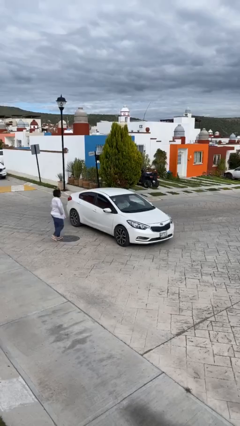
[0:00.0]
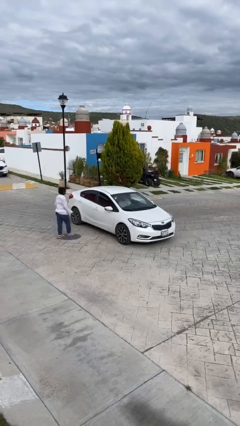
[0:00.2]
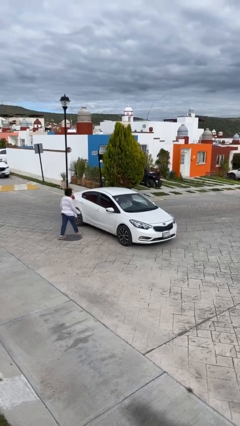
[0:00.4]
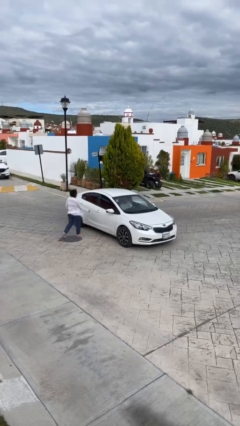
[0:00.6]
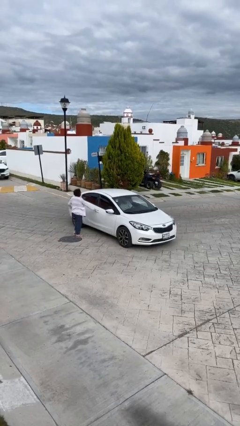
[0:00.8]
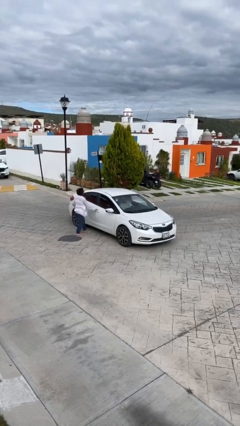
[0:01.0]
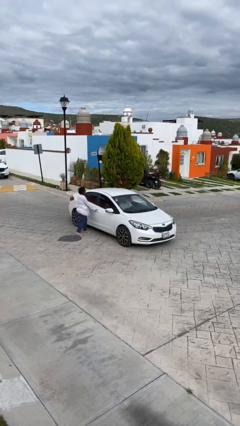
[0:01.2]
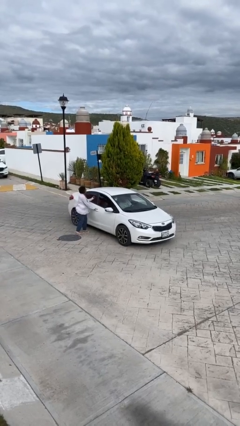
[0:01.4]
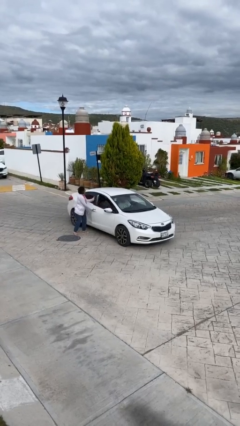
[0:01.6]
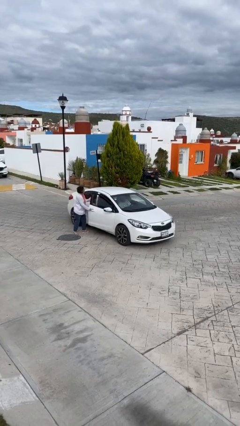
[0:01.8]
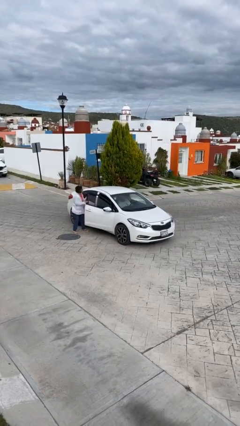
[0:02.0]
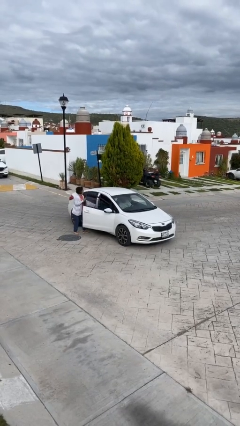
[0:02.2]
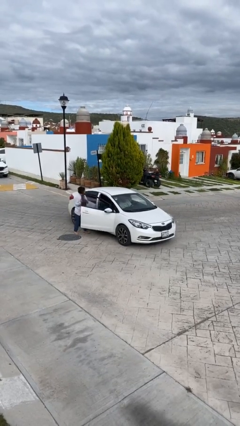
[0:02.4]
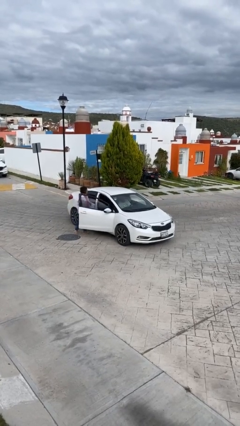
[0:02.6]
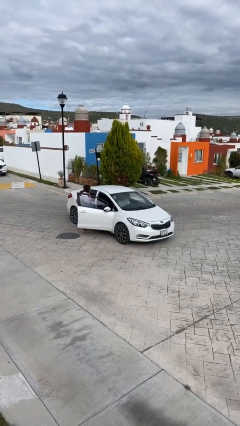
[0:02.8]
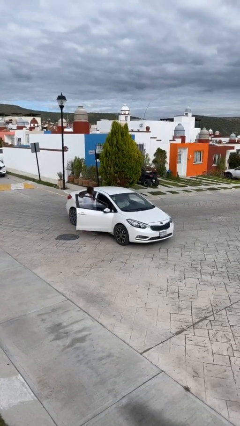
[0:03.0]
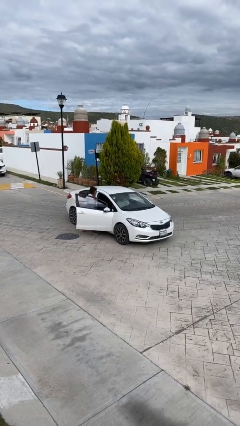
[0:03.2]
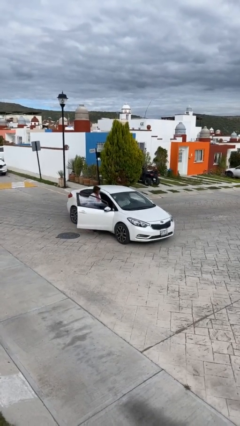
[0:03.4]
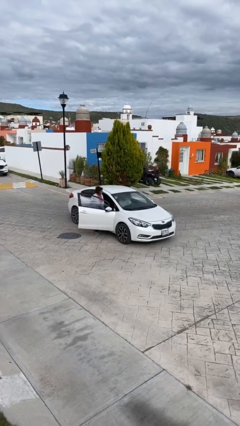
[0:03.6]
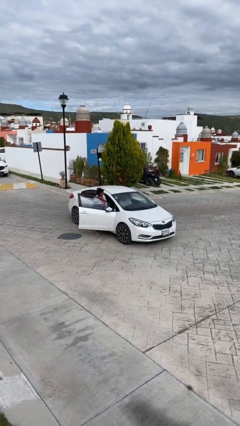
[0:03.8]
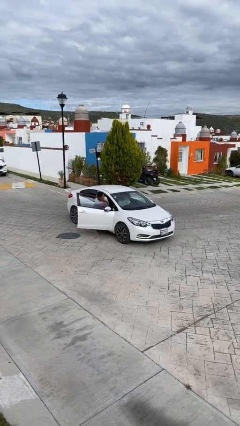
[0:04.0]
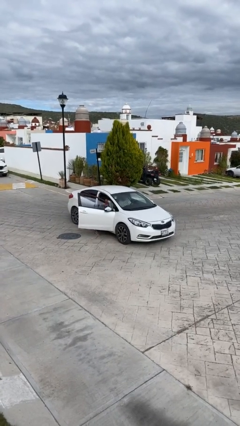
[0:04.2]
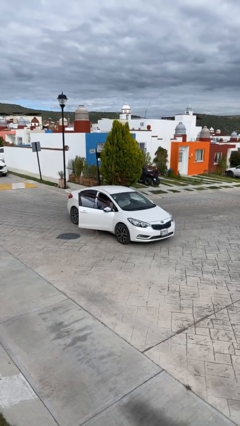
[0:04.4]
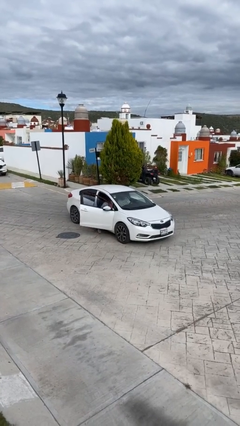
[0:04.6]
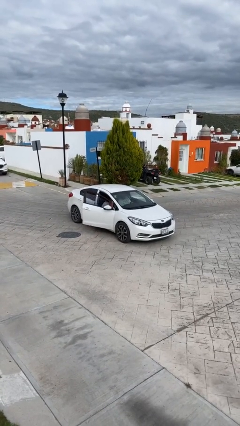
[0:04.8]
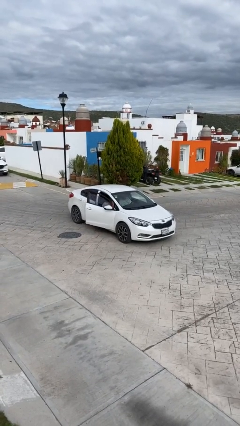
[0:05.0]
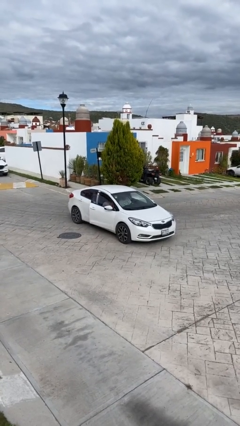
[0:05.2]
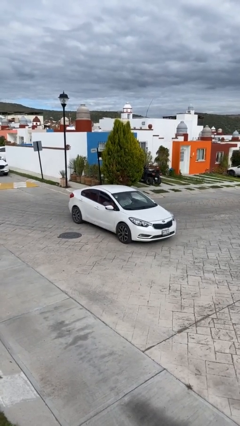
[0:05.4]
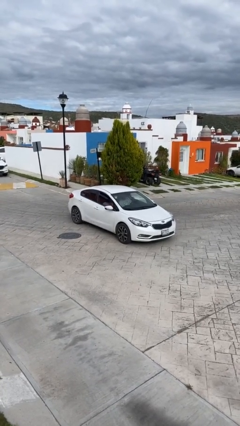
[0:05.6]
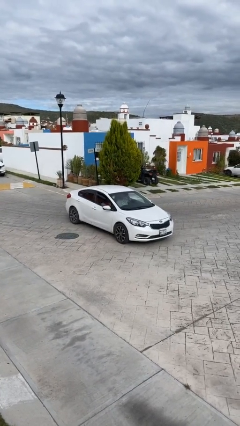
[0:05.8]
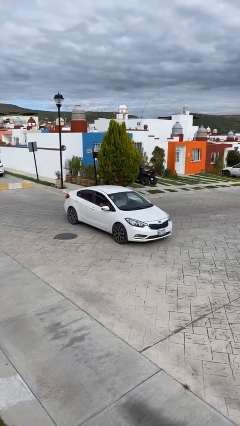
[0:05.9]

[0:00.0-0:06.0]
car picks up person

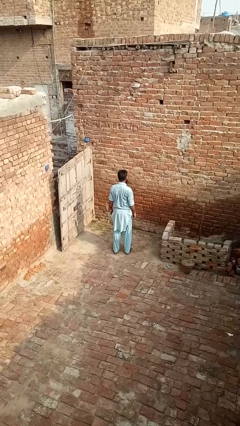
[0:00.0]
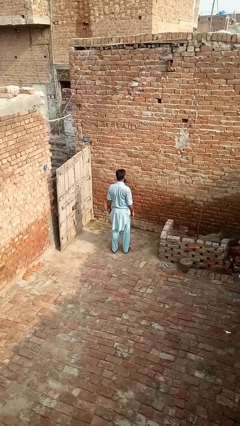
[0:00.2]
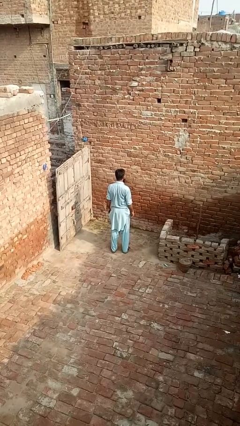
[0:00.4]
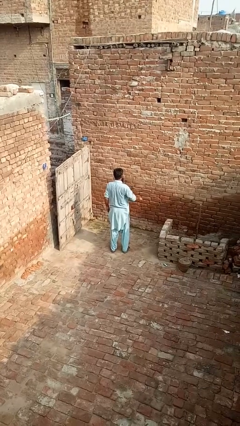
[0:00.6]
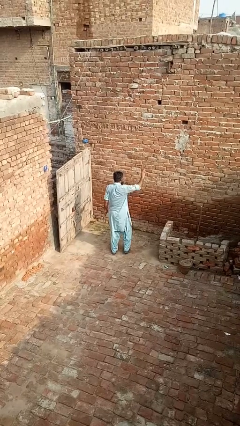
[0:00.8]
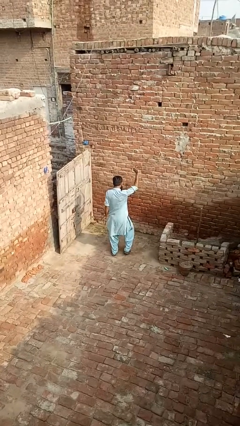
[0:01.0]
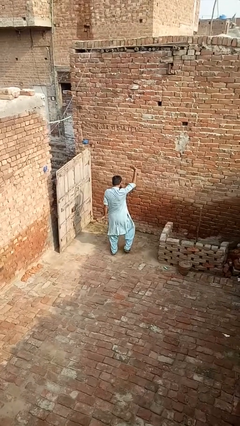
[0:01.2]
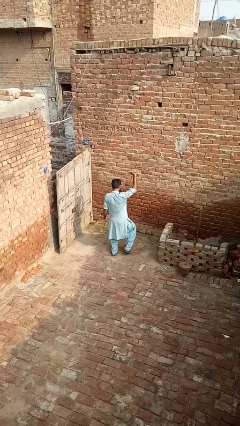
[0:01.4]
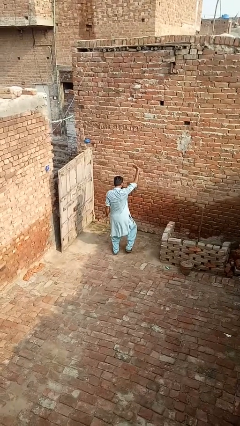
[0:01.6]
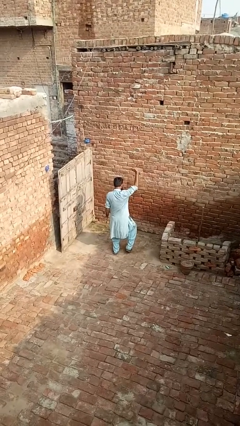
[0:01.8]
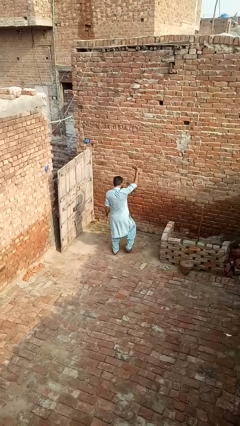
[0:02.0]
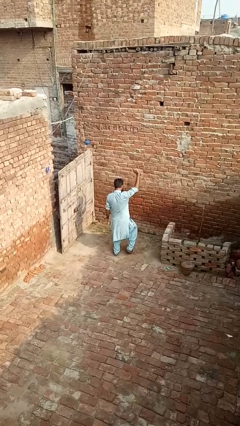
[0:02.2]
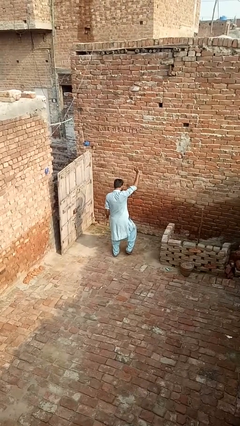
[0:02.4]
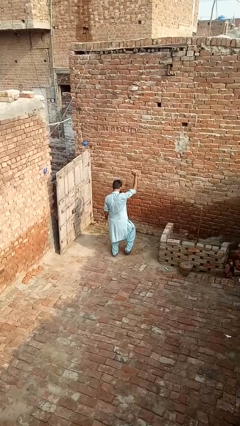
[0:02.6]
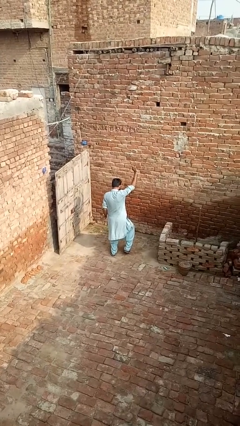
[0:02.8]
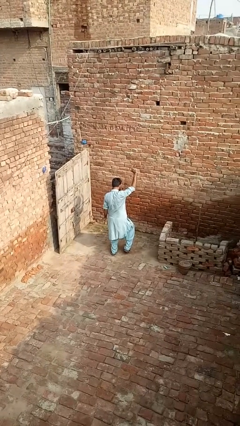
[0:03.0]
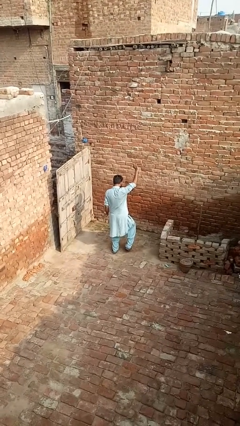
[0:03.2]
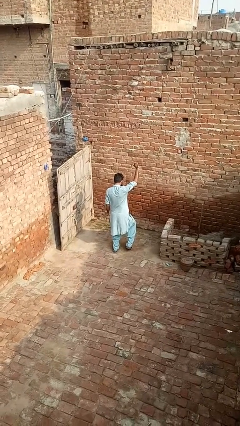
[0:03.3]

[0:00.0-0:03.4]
person dances in place

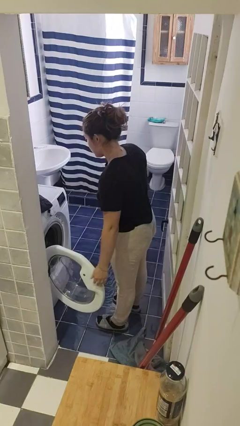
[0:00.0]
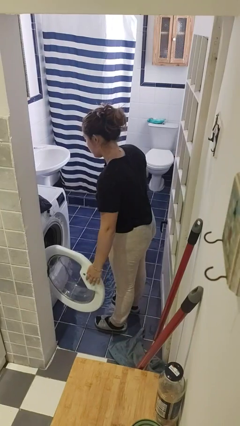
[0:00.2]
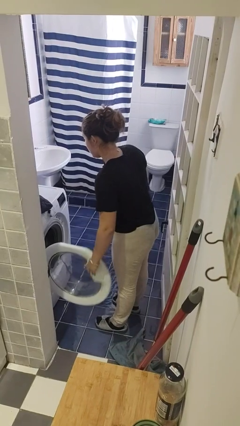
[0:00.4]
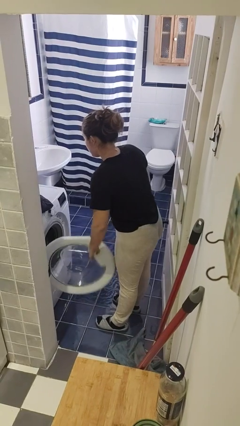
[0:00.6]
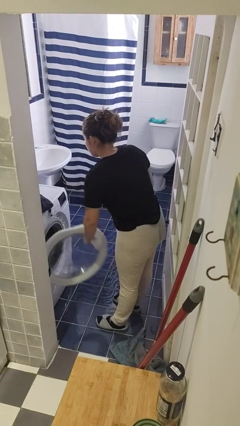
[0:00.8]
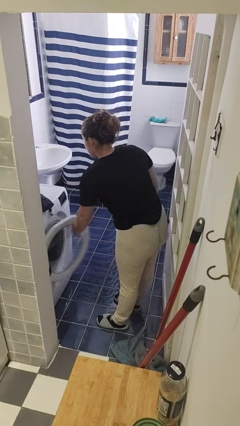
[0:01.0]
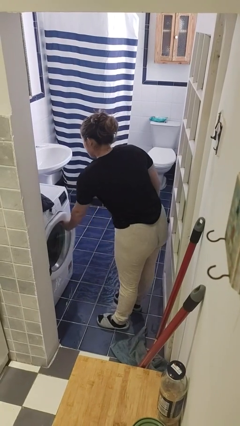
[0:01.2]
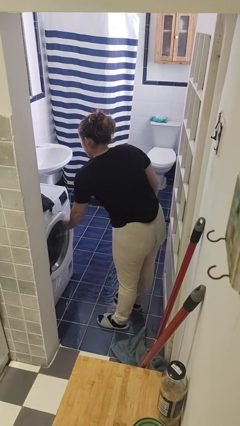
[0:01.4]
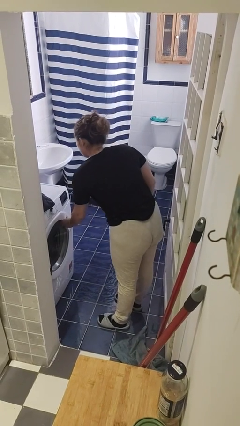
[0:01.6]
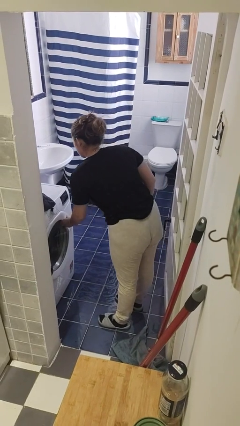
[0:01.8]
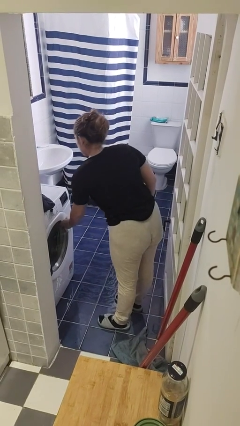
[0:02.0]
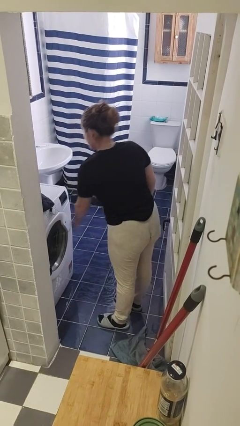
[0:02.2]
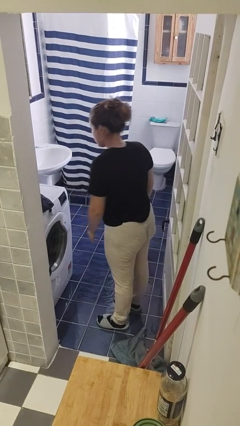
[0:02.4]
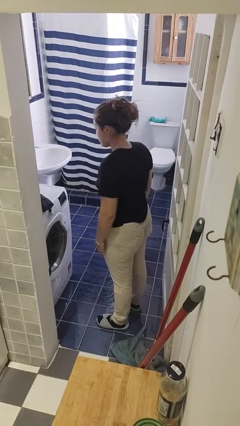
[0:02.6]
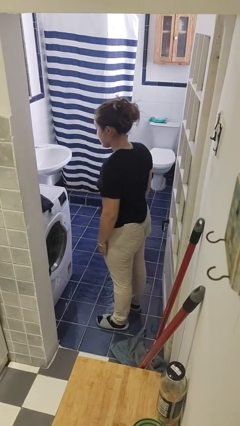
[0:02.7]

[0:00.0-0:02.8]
person closes clothes washer

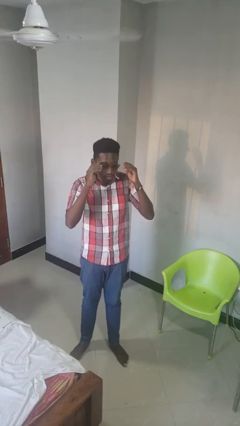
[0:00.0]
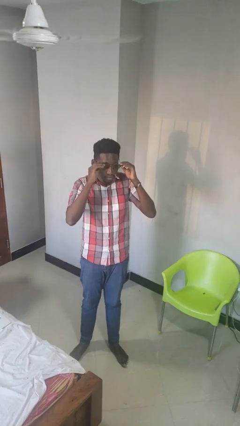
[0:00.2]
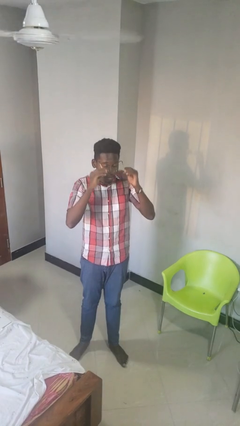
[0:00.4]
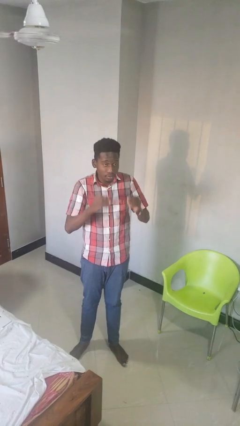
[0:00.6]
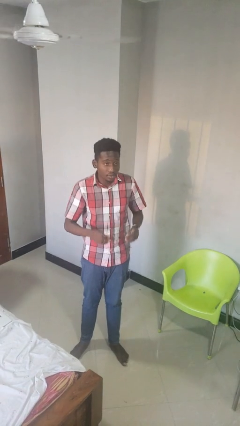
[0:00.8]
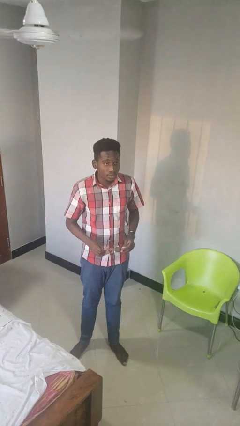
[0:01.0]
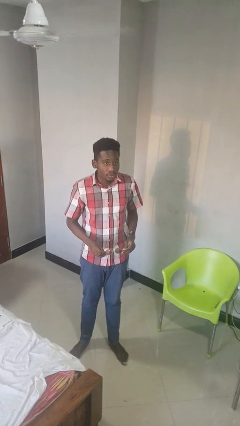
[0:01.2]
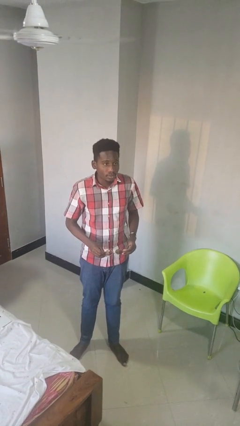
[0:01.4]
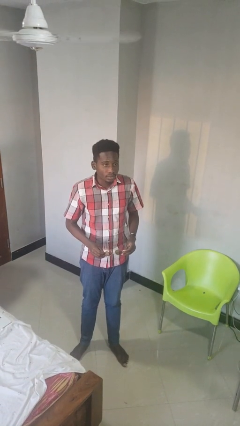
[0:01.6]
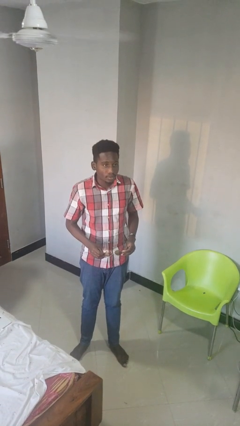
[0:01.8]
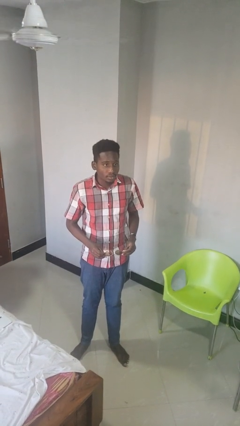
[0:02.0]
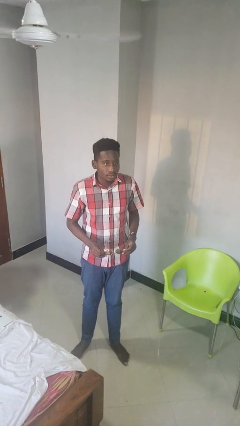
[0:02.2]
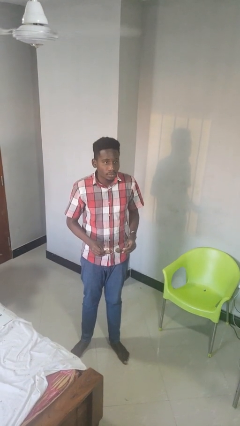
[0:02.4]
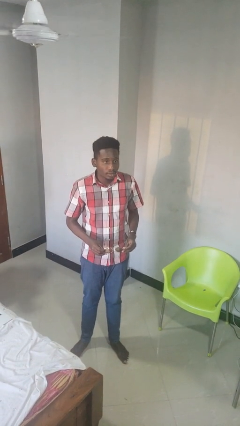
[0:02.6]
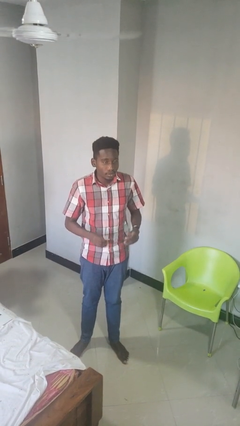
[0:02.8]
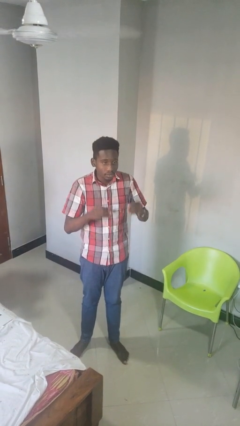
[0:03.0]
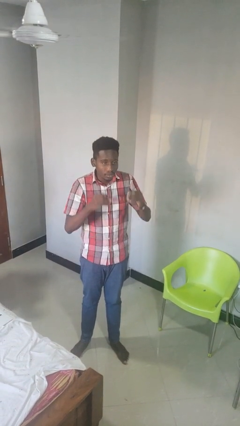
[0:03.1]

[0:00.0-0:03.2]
person takes off sunglasses

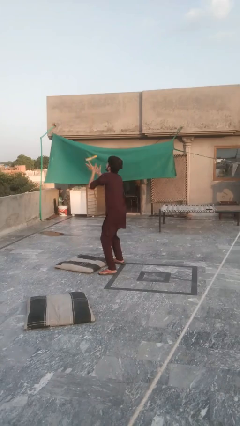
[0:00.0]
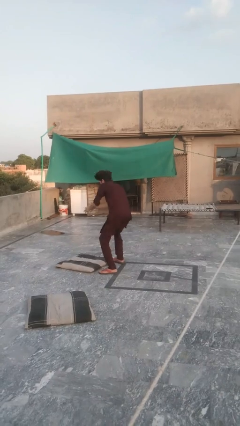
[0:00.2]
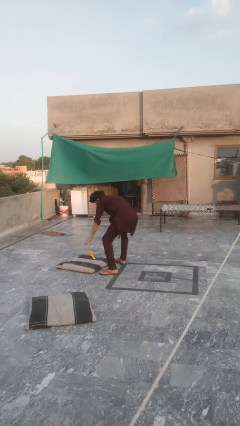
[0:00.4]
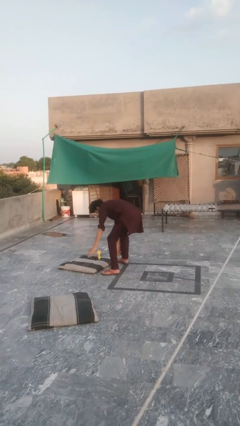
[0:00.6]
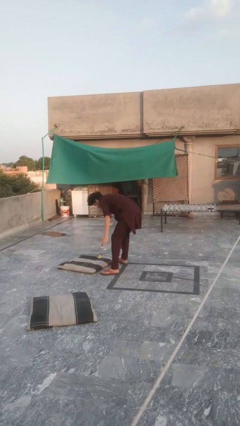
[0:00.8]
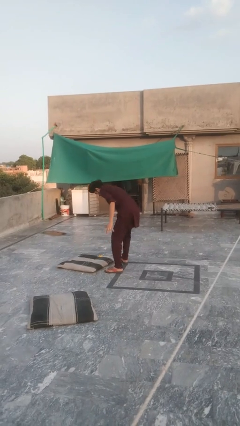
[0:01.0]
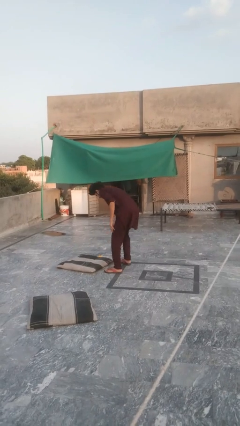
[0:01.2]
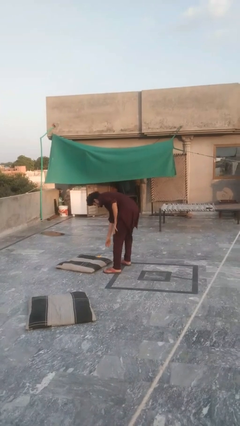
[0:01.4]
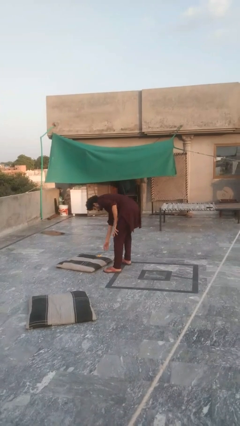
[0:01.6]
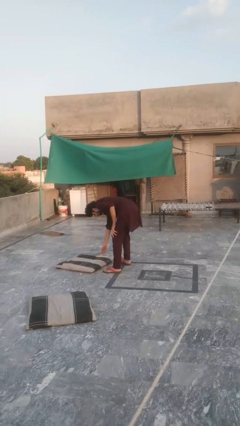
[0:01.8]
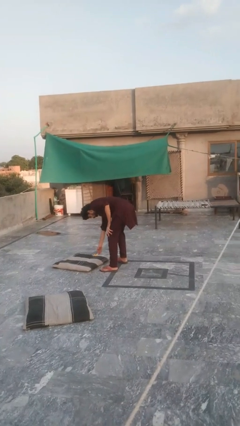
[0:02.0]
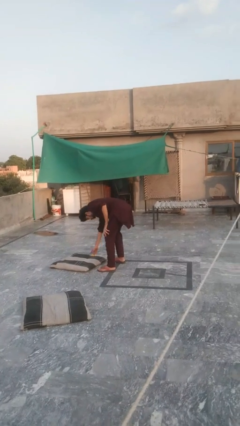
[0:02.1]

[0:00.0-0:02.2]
person catches dropped object

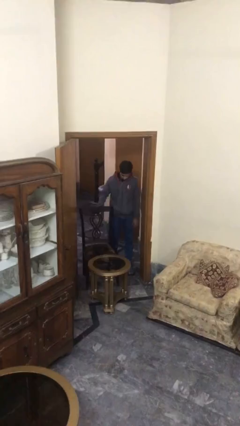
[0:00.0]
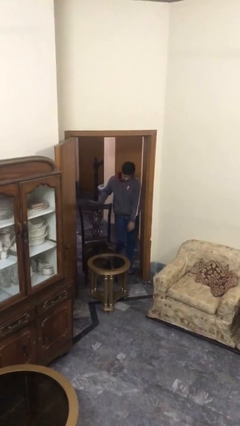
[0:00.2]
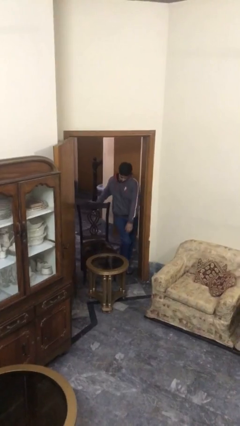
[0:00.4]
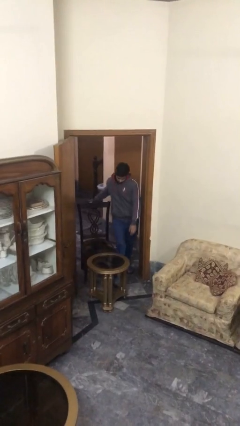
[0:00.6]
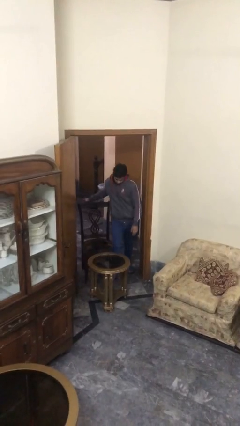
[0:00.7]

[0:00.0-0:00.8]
person stands up
